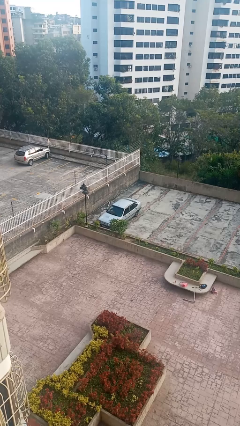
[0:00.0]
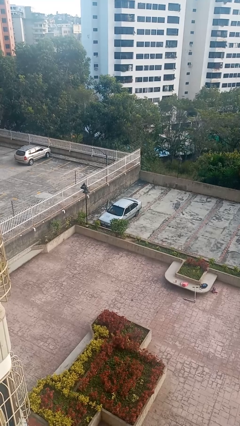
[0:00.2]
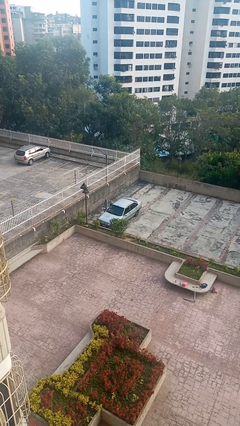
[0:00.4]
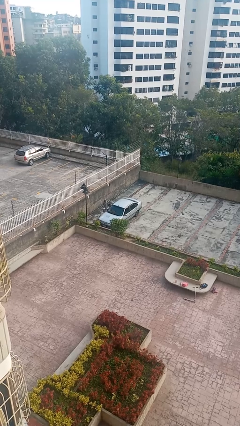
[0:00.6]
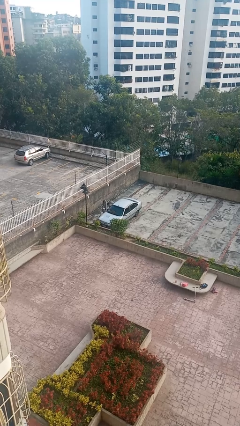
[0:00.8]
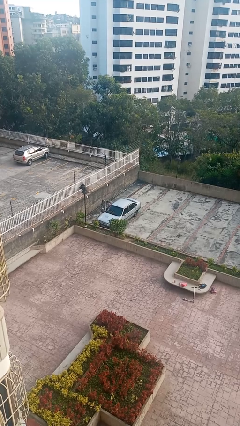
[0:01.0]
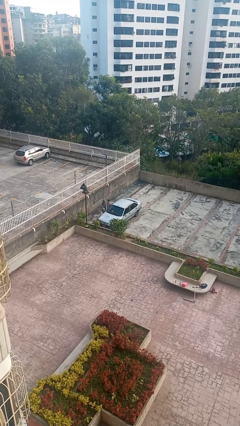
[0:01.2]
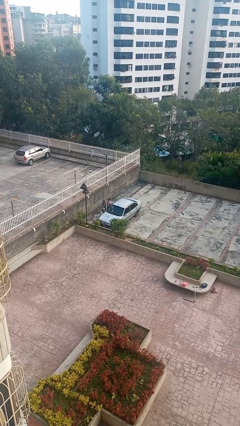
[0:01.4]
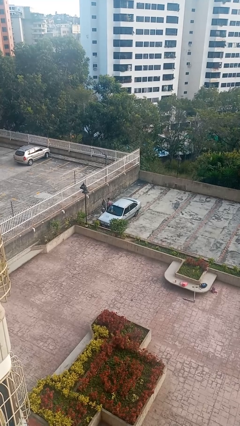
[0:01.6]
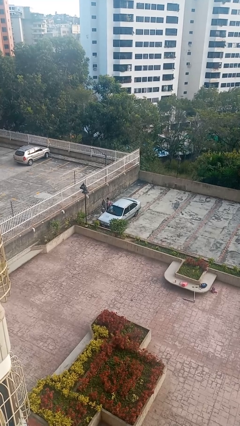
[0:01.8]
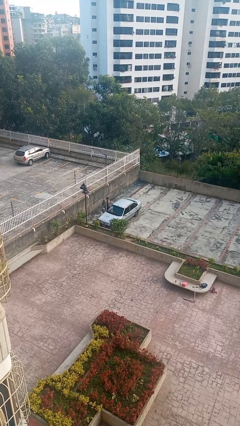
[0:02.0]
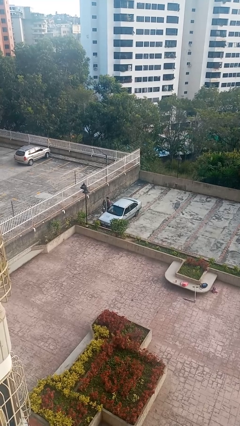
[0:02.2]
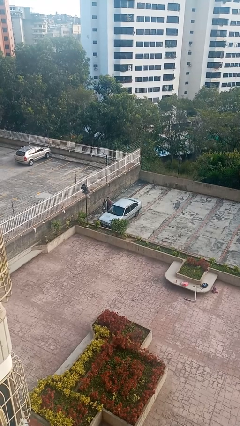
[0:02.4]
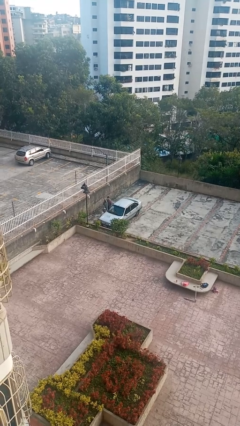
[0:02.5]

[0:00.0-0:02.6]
car drops off person

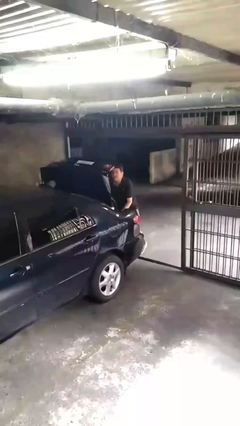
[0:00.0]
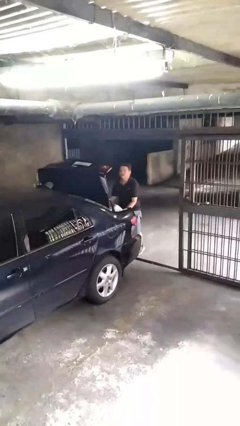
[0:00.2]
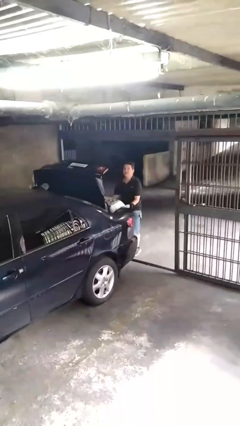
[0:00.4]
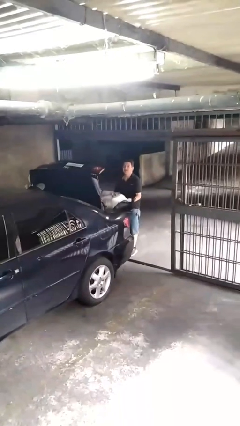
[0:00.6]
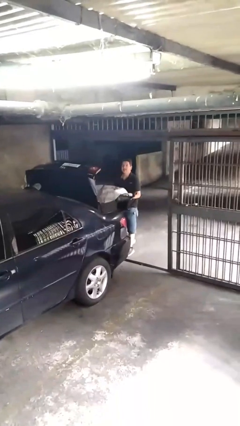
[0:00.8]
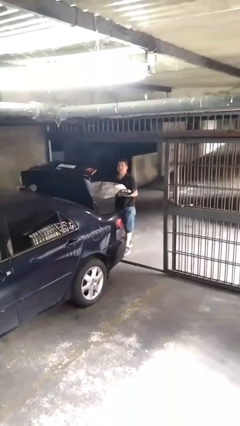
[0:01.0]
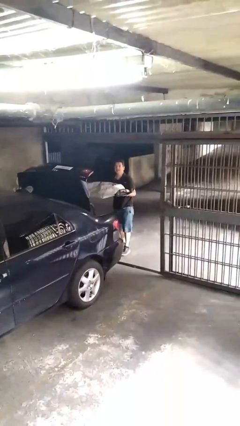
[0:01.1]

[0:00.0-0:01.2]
person unloads car

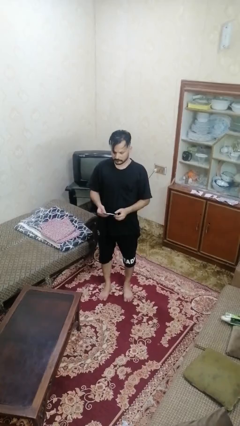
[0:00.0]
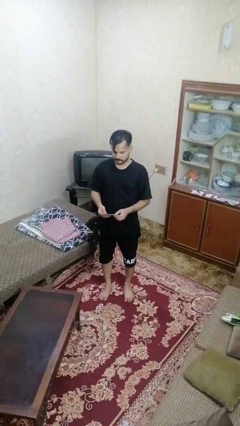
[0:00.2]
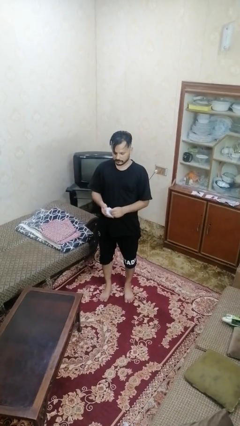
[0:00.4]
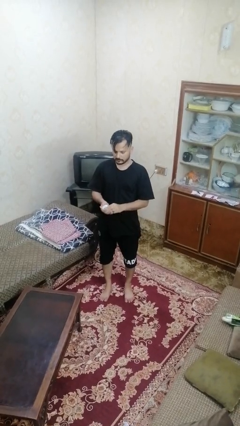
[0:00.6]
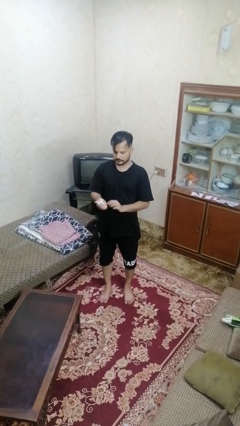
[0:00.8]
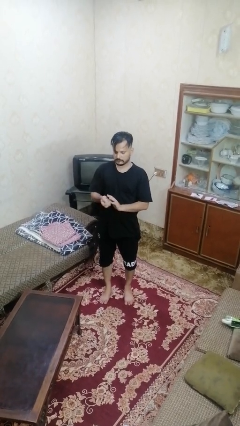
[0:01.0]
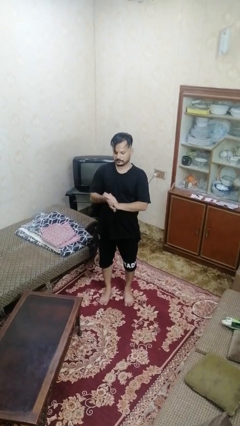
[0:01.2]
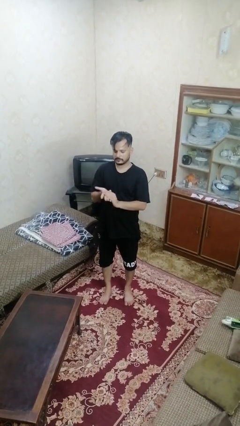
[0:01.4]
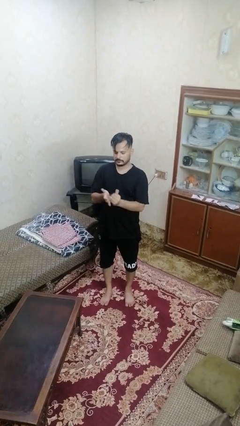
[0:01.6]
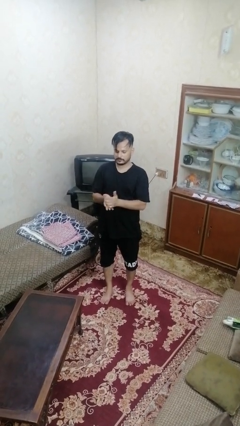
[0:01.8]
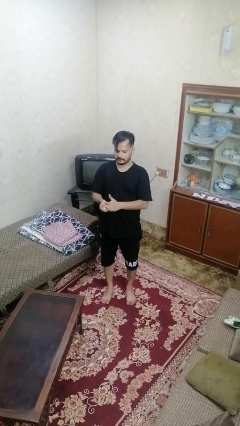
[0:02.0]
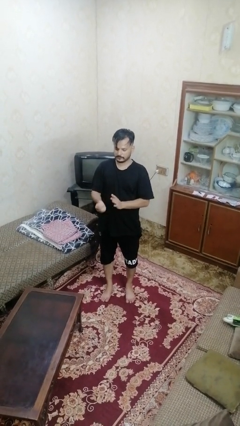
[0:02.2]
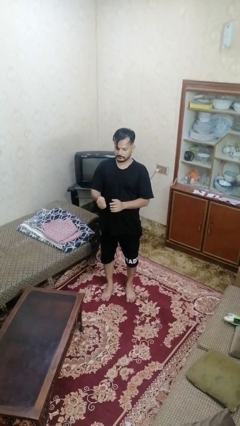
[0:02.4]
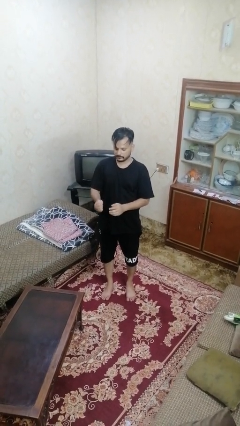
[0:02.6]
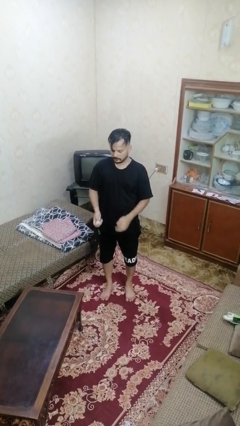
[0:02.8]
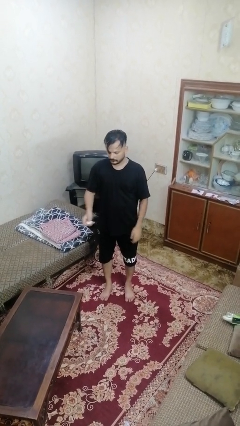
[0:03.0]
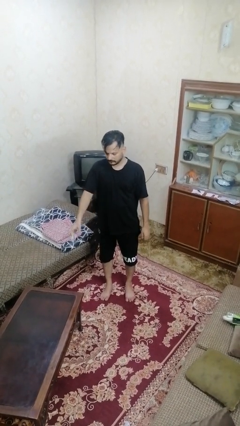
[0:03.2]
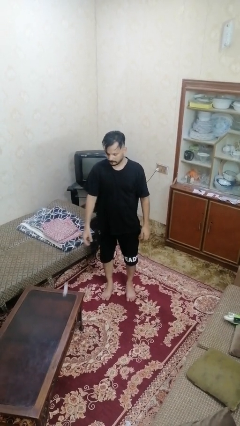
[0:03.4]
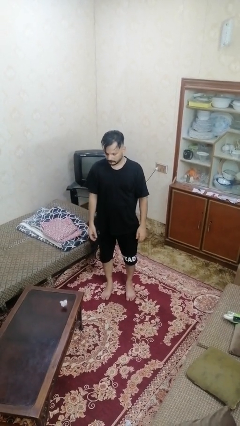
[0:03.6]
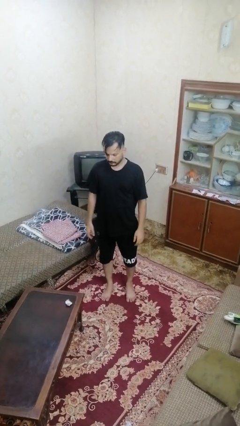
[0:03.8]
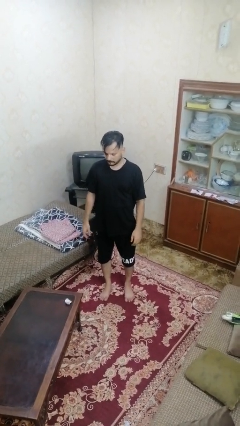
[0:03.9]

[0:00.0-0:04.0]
person crumples paper

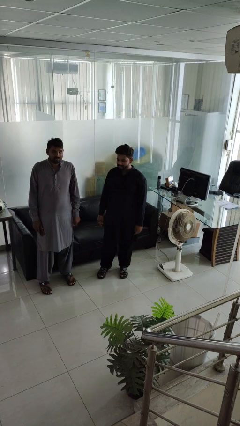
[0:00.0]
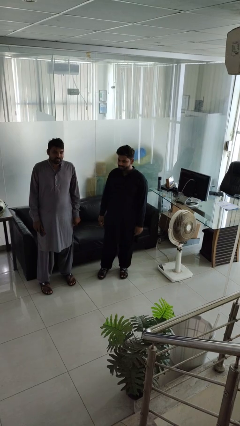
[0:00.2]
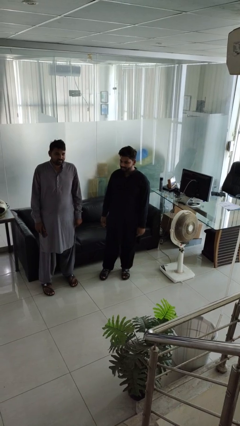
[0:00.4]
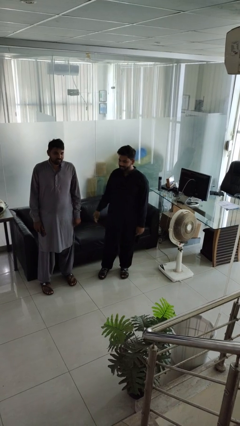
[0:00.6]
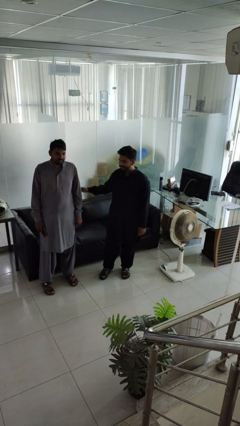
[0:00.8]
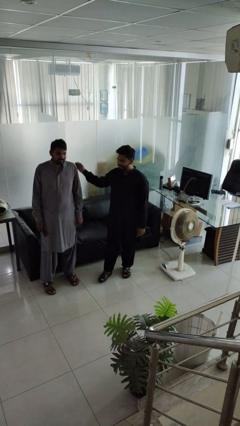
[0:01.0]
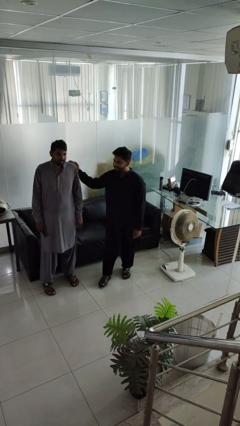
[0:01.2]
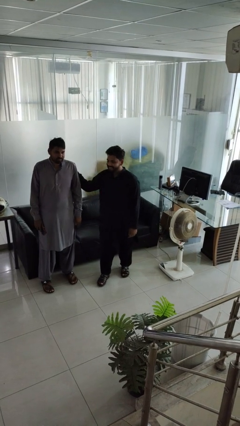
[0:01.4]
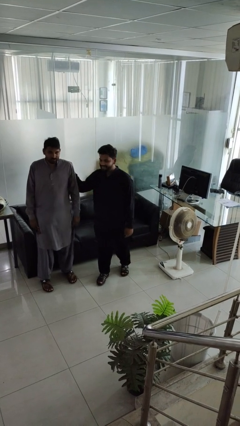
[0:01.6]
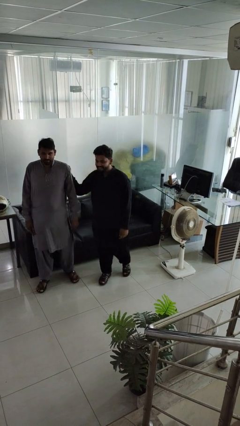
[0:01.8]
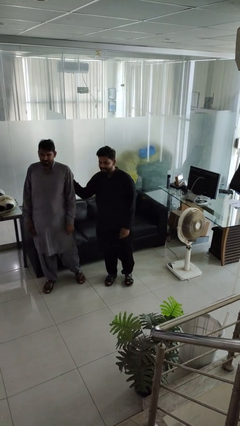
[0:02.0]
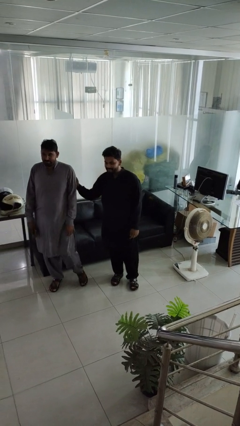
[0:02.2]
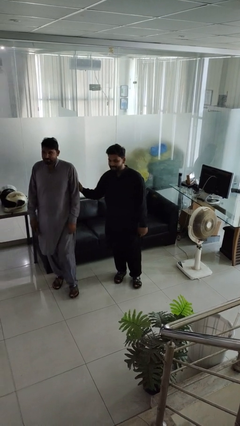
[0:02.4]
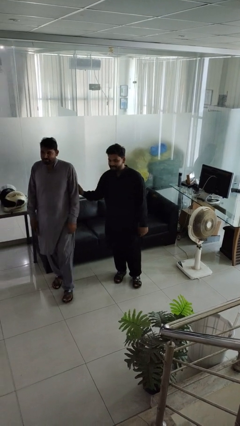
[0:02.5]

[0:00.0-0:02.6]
person shoves person

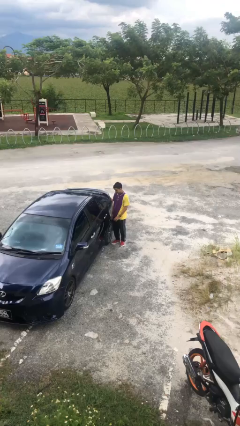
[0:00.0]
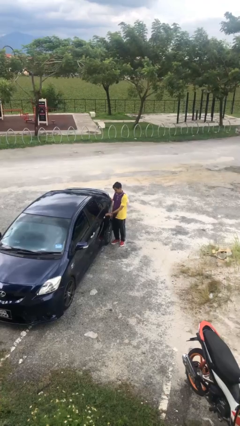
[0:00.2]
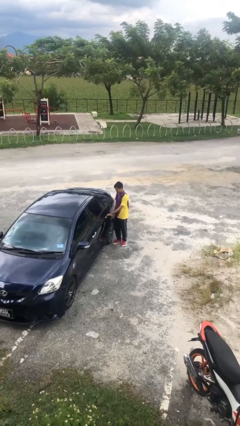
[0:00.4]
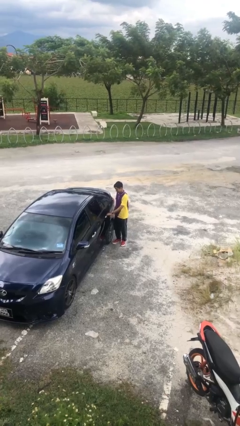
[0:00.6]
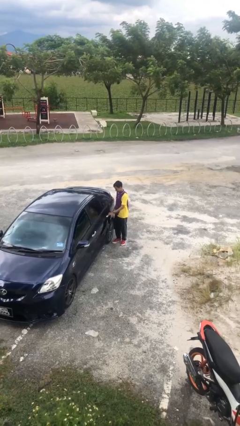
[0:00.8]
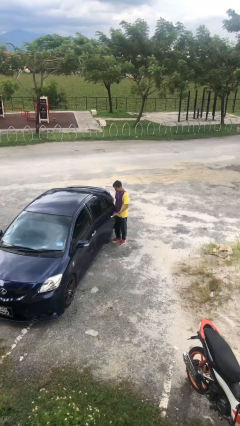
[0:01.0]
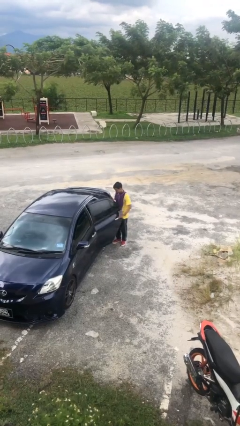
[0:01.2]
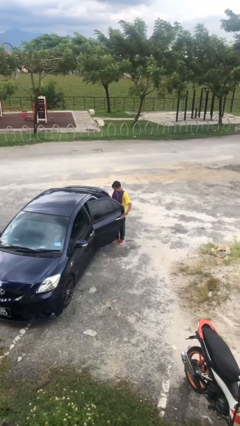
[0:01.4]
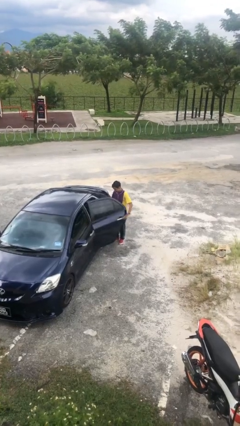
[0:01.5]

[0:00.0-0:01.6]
person opens car door

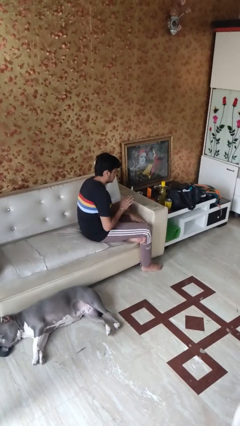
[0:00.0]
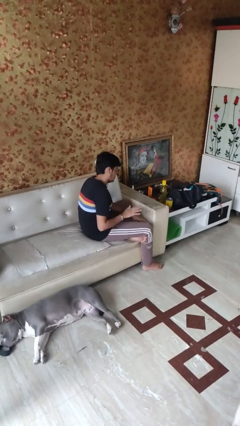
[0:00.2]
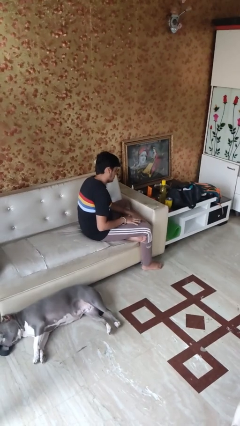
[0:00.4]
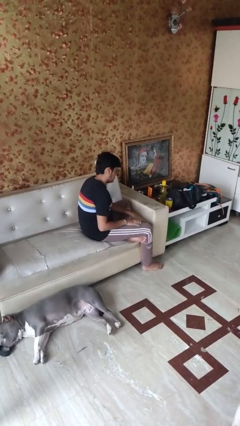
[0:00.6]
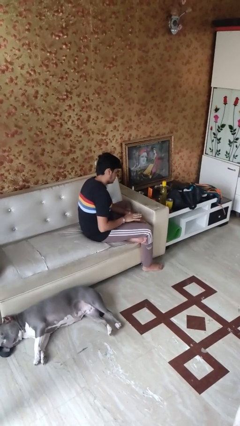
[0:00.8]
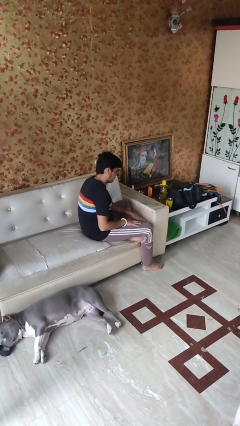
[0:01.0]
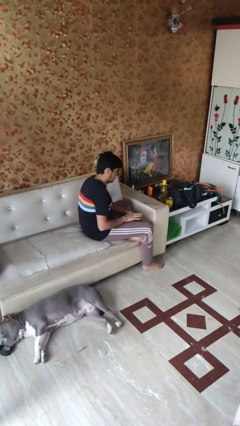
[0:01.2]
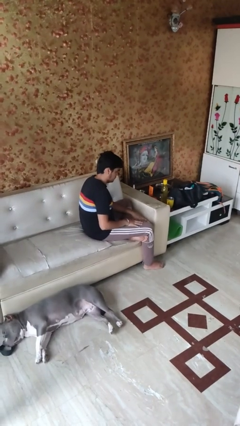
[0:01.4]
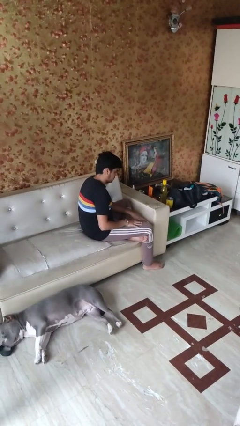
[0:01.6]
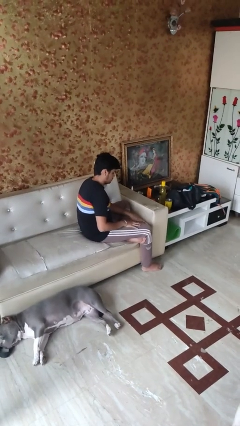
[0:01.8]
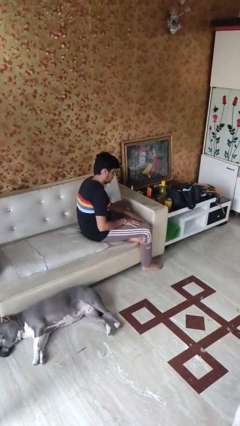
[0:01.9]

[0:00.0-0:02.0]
person slaps hands on thighs

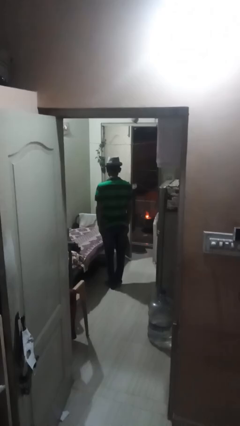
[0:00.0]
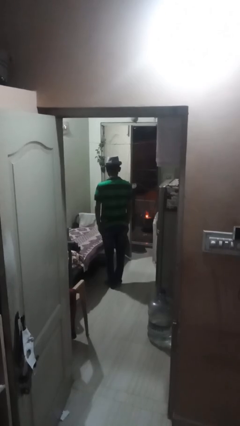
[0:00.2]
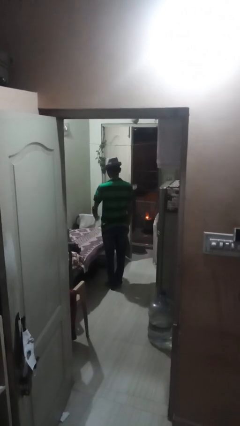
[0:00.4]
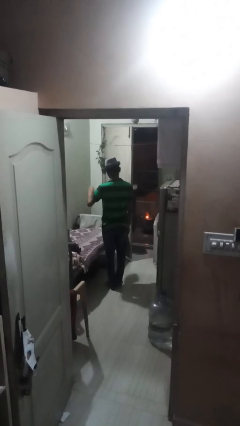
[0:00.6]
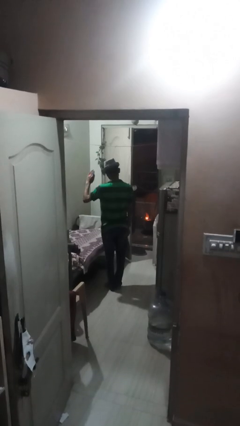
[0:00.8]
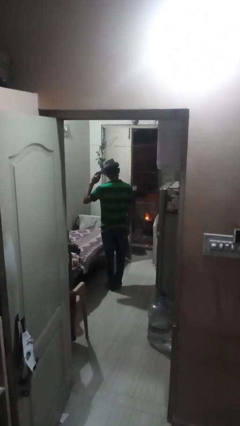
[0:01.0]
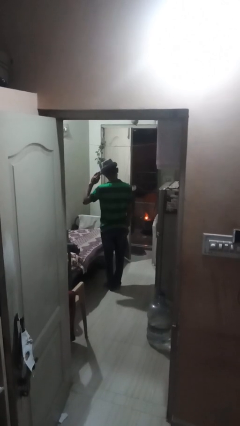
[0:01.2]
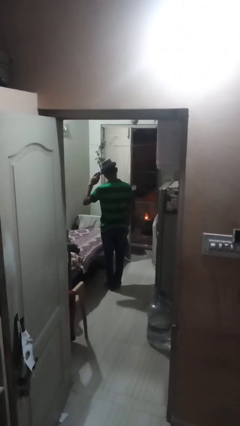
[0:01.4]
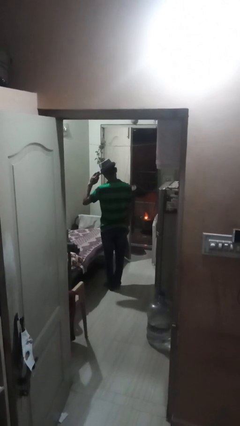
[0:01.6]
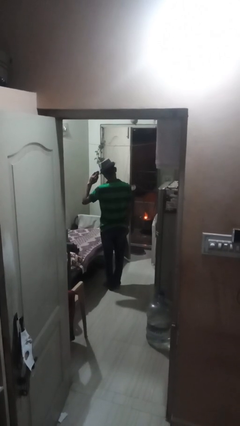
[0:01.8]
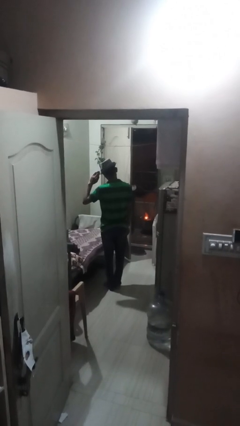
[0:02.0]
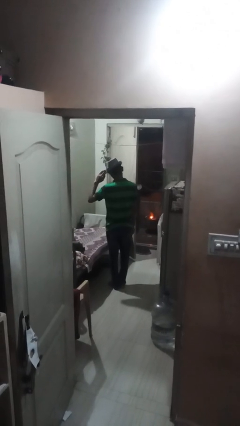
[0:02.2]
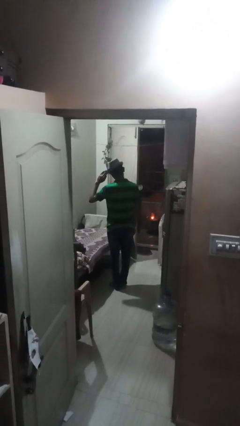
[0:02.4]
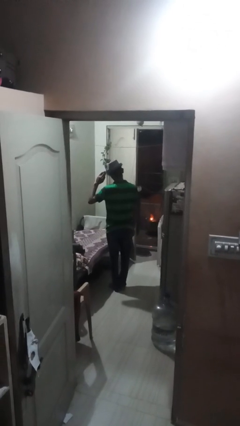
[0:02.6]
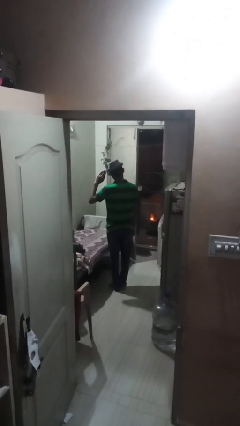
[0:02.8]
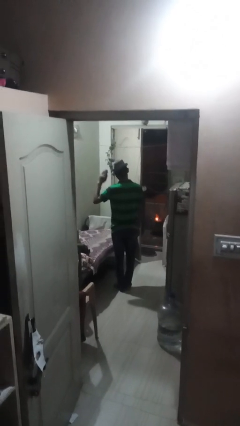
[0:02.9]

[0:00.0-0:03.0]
person salutes

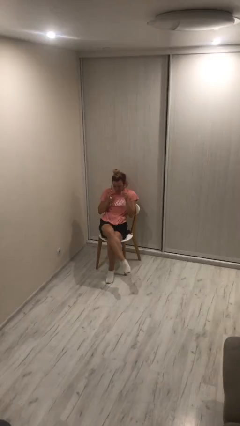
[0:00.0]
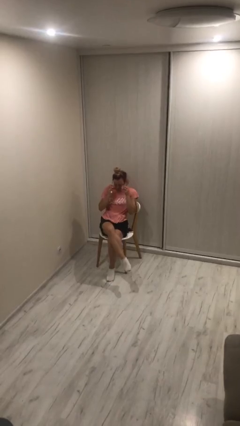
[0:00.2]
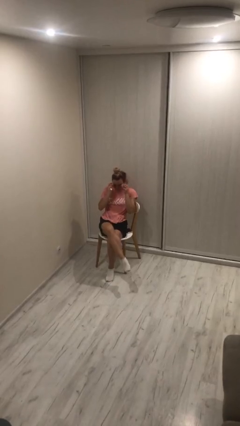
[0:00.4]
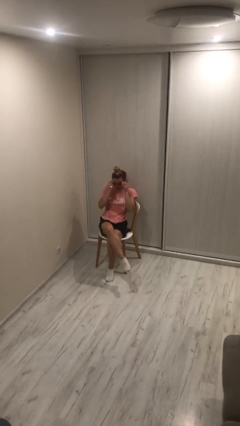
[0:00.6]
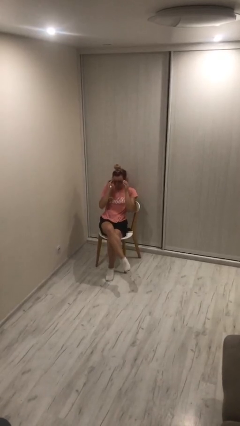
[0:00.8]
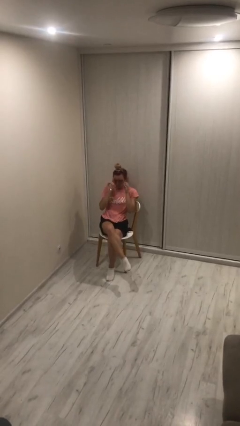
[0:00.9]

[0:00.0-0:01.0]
person puts on glasses
